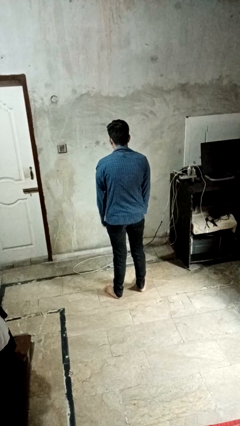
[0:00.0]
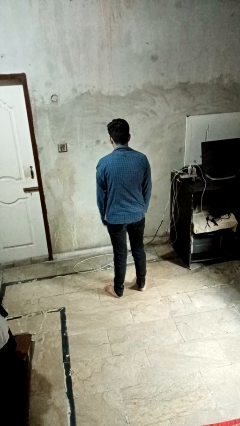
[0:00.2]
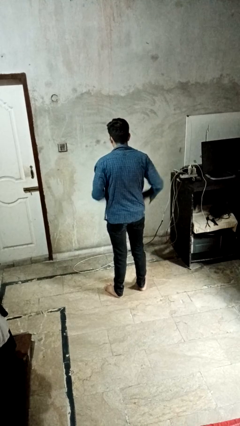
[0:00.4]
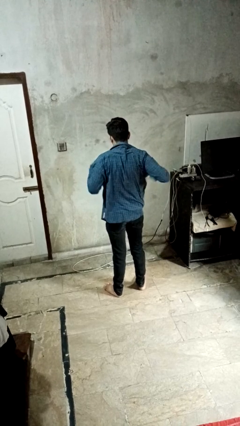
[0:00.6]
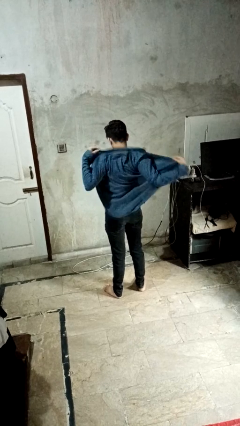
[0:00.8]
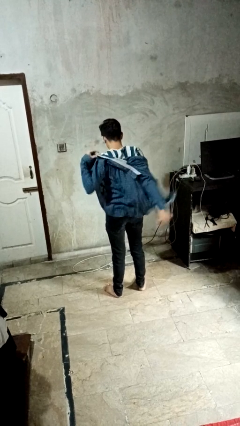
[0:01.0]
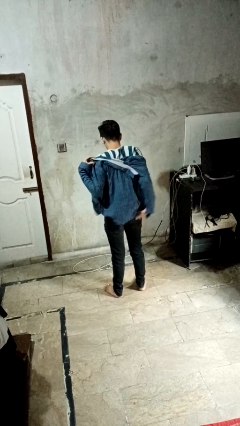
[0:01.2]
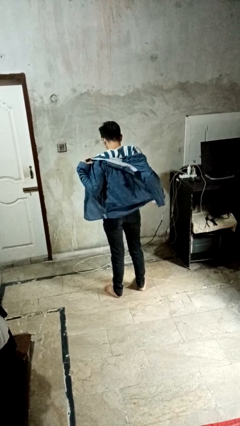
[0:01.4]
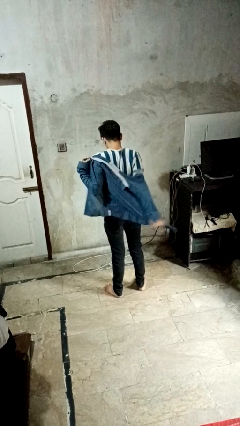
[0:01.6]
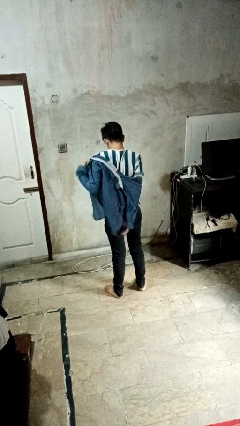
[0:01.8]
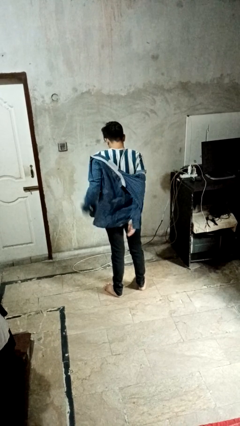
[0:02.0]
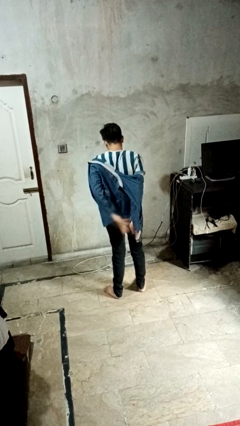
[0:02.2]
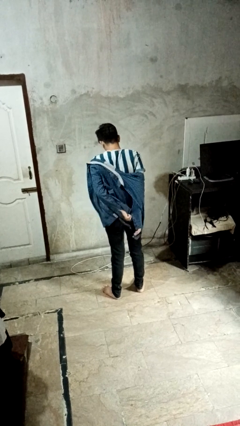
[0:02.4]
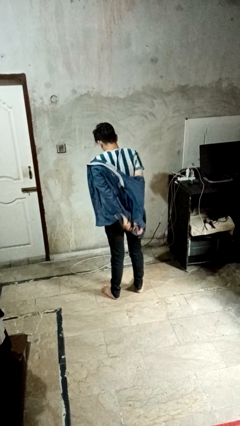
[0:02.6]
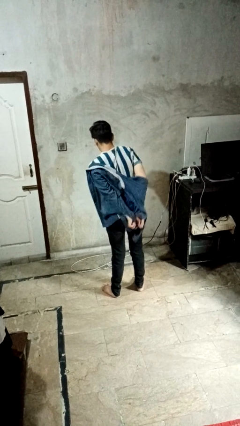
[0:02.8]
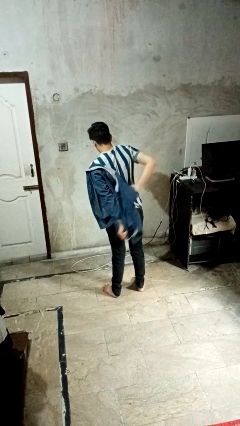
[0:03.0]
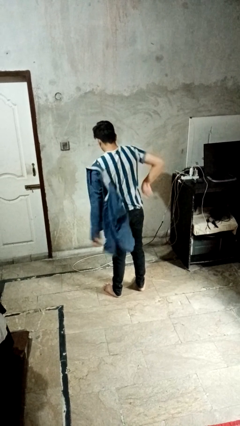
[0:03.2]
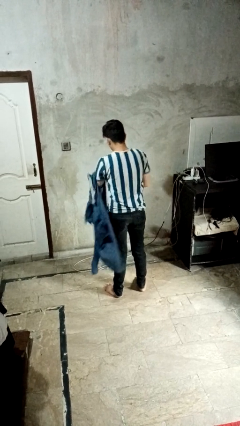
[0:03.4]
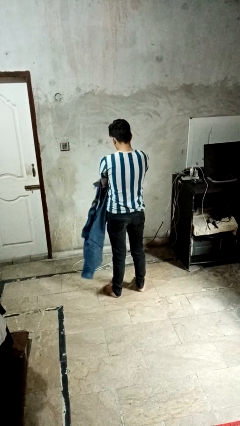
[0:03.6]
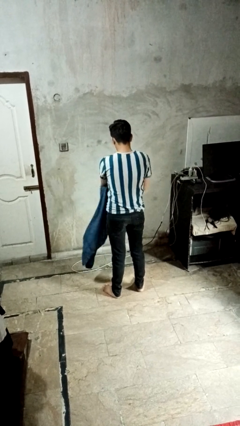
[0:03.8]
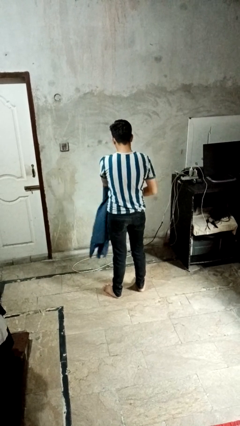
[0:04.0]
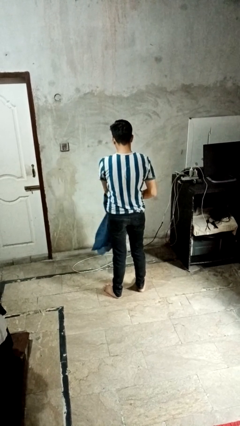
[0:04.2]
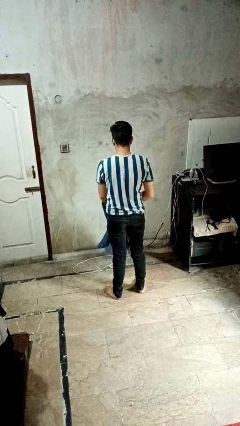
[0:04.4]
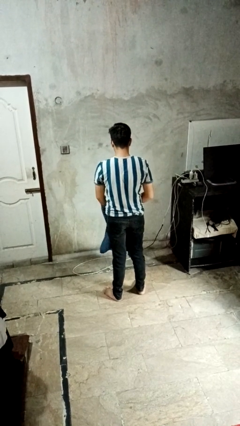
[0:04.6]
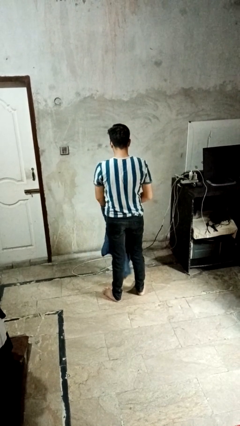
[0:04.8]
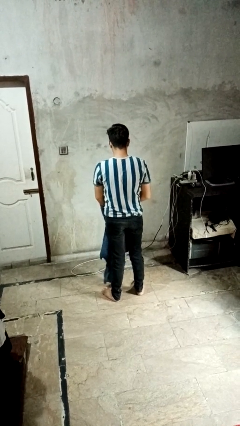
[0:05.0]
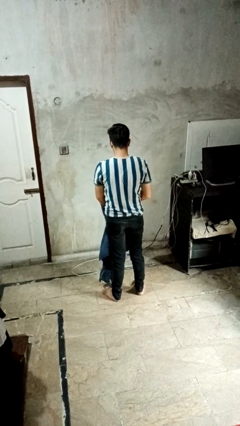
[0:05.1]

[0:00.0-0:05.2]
person takes off shirt

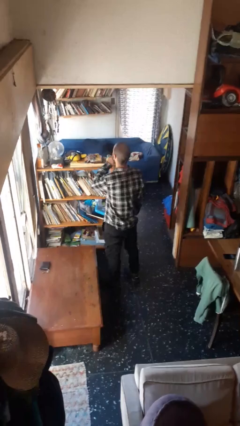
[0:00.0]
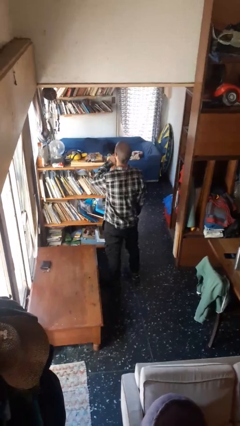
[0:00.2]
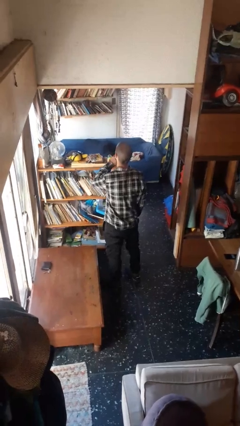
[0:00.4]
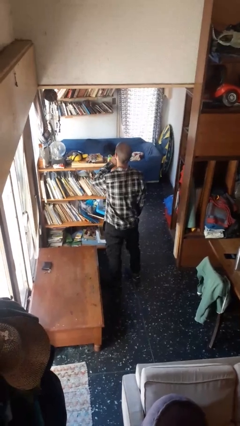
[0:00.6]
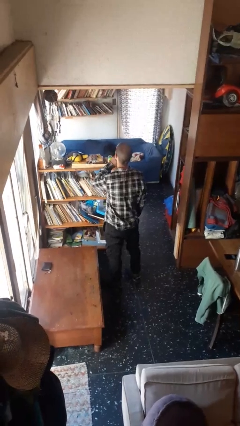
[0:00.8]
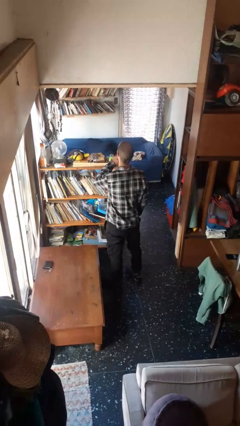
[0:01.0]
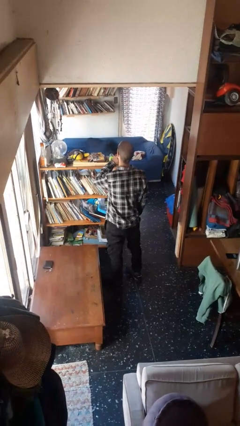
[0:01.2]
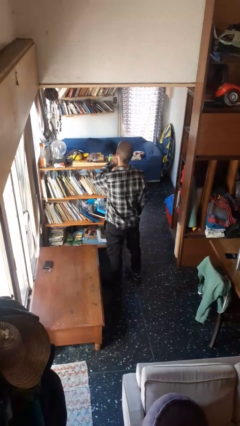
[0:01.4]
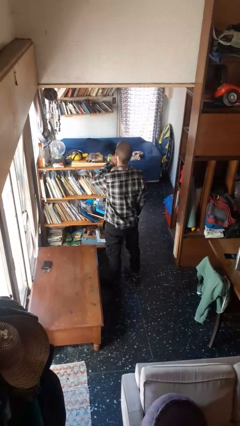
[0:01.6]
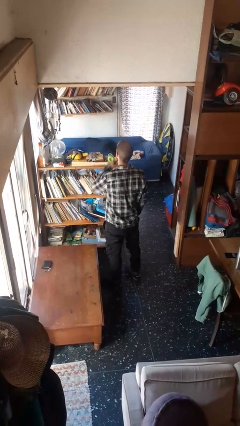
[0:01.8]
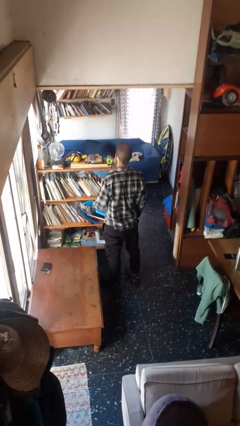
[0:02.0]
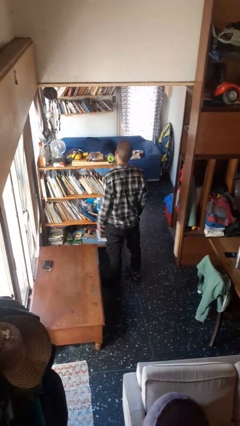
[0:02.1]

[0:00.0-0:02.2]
person gestures be quiet

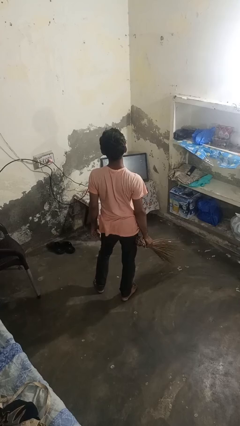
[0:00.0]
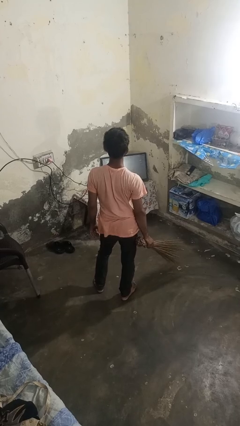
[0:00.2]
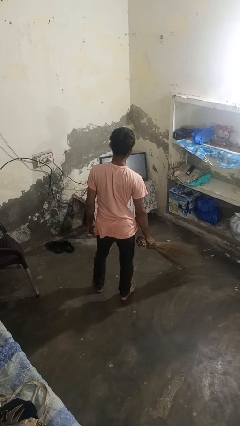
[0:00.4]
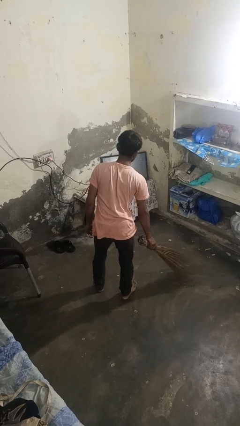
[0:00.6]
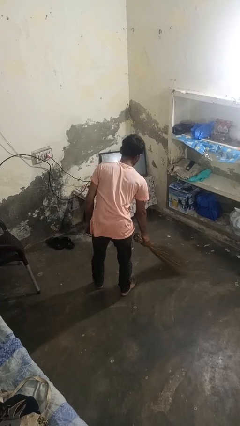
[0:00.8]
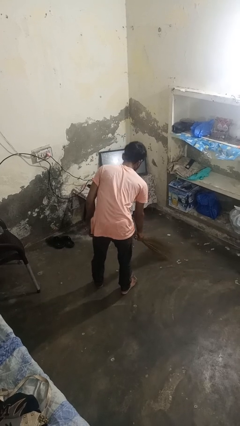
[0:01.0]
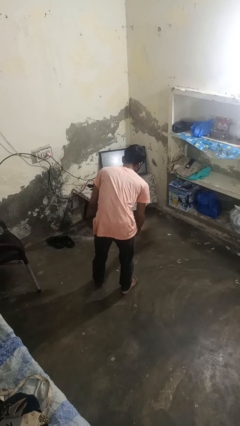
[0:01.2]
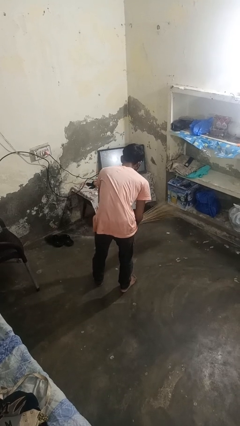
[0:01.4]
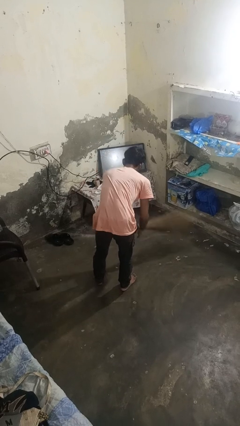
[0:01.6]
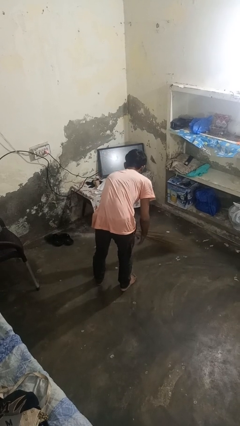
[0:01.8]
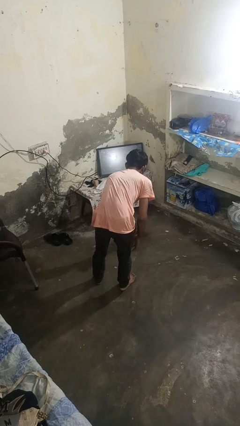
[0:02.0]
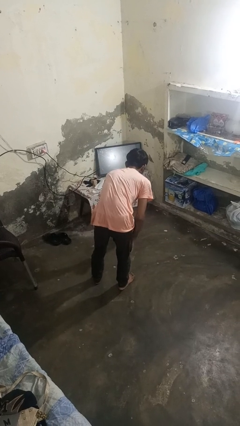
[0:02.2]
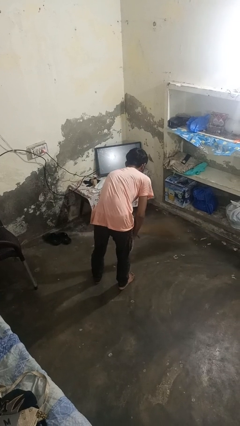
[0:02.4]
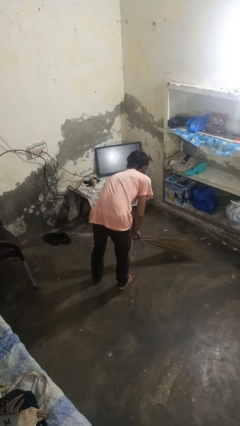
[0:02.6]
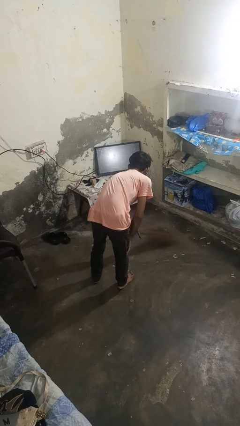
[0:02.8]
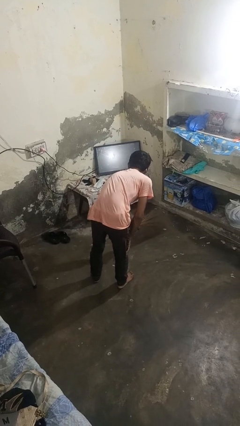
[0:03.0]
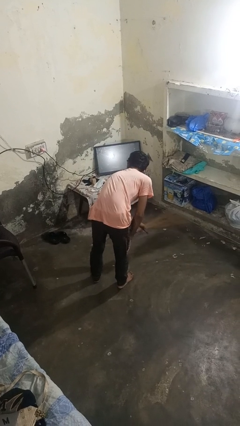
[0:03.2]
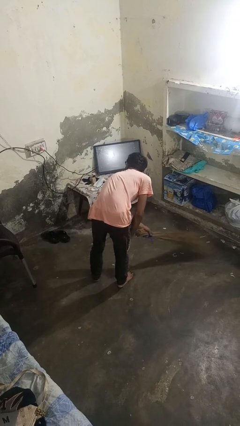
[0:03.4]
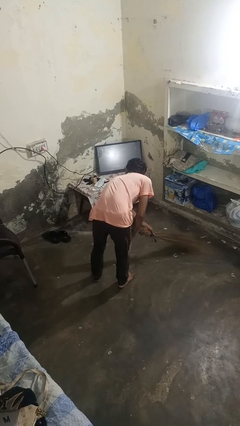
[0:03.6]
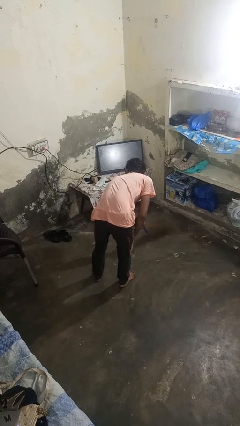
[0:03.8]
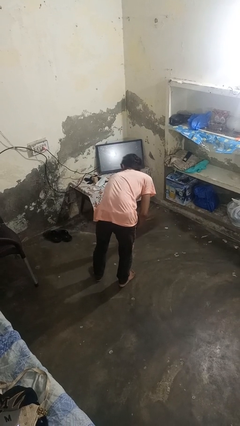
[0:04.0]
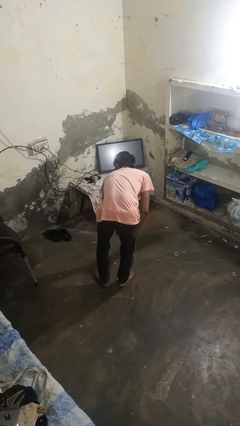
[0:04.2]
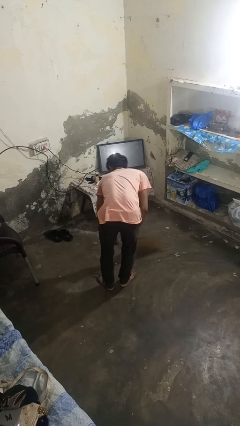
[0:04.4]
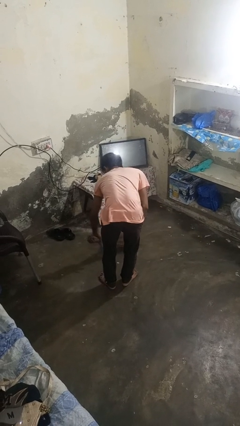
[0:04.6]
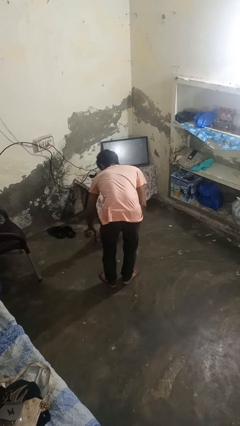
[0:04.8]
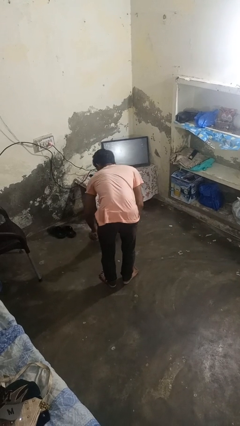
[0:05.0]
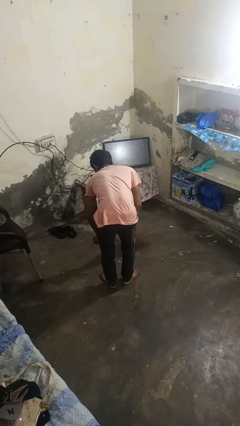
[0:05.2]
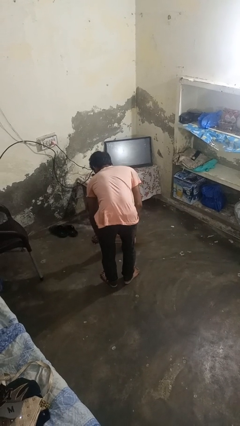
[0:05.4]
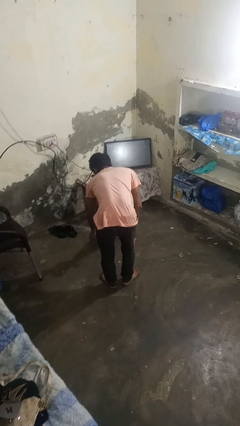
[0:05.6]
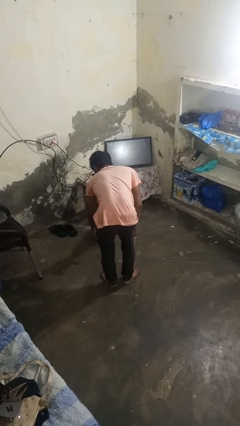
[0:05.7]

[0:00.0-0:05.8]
person sweeps floor

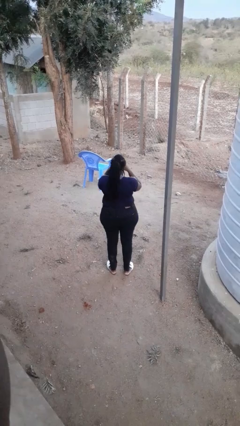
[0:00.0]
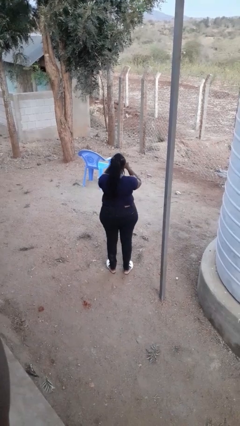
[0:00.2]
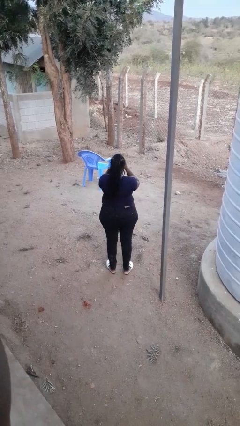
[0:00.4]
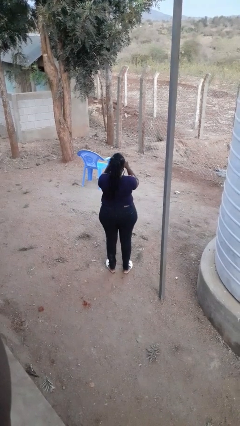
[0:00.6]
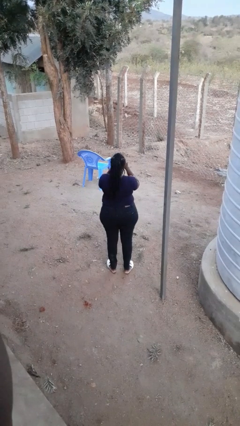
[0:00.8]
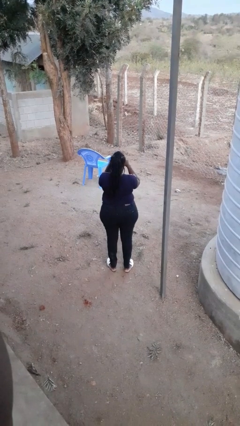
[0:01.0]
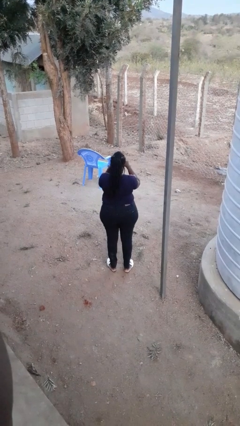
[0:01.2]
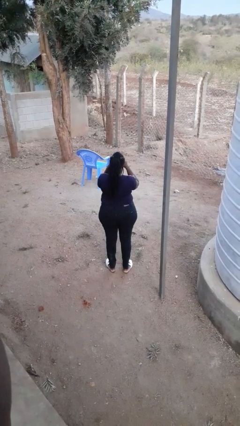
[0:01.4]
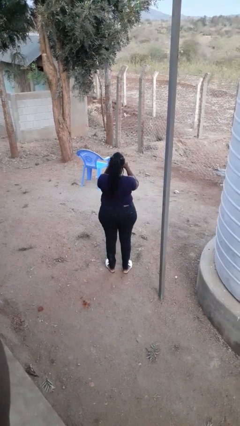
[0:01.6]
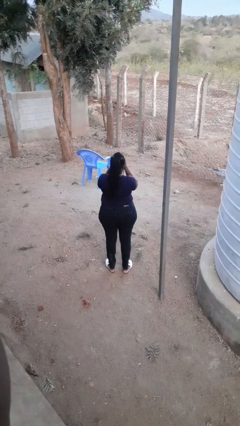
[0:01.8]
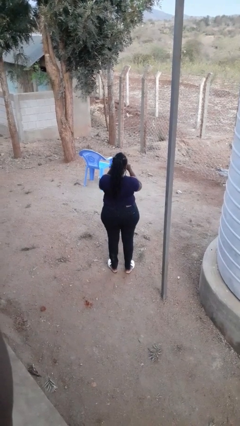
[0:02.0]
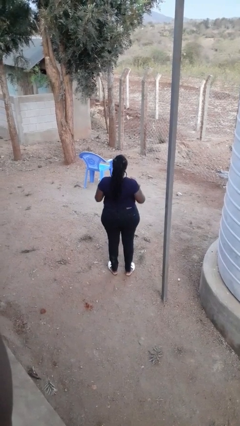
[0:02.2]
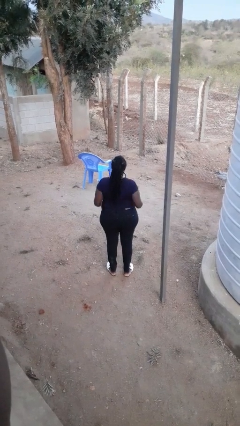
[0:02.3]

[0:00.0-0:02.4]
person rubs eyes

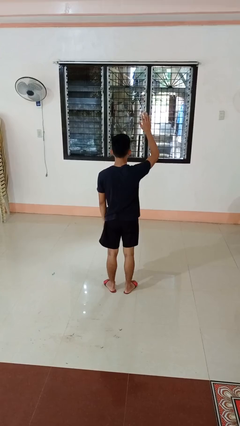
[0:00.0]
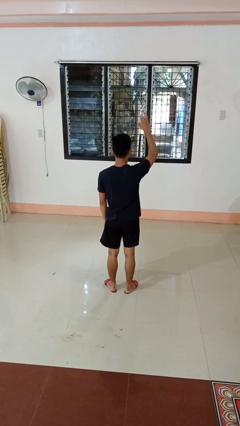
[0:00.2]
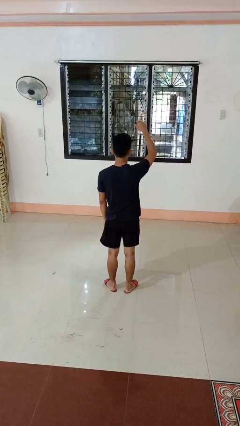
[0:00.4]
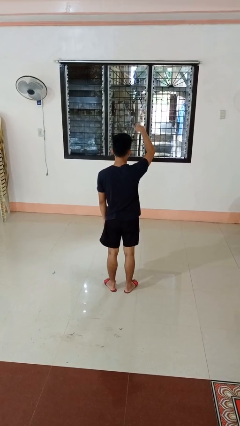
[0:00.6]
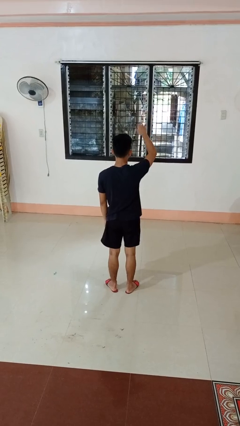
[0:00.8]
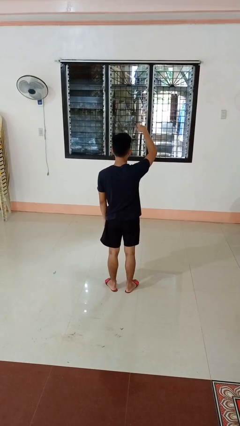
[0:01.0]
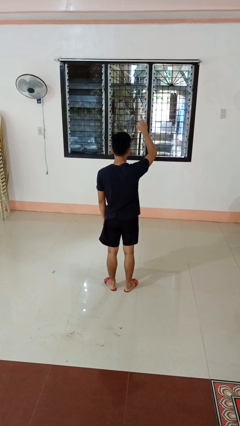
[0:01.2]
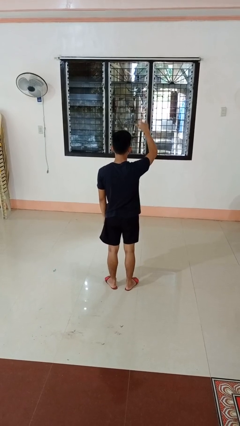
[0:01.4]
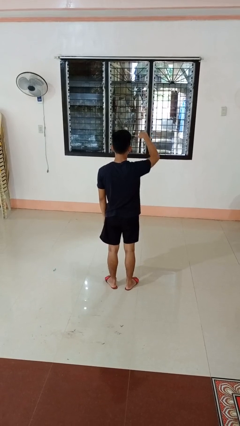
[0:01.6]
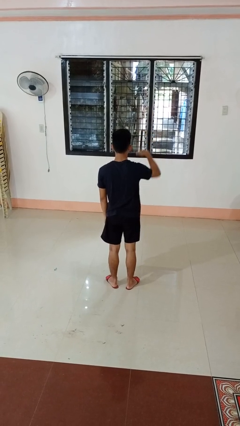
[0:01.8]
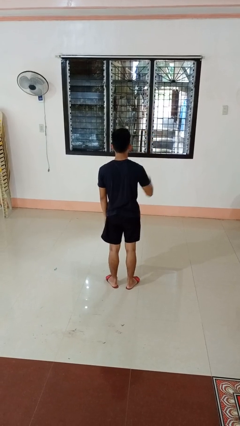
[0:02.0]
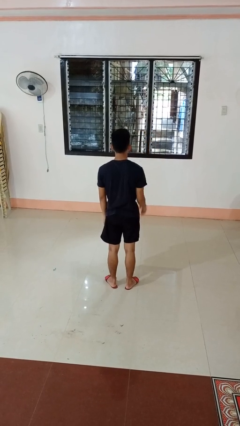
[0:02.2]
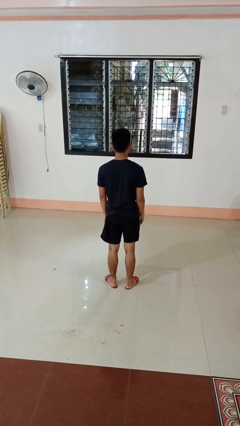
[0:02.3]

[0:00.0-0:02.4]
person gestures come here
